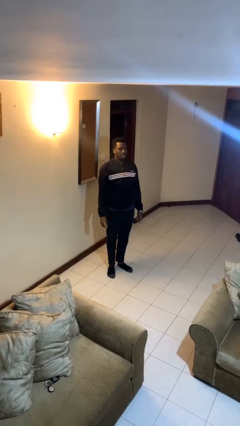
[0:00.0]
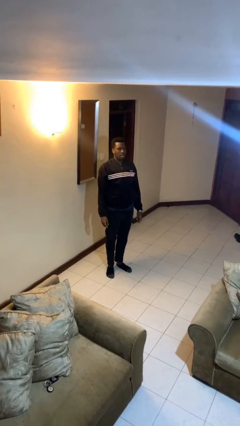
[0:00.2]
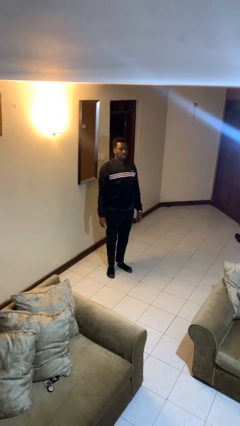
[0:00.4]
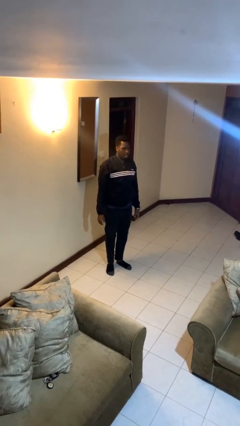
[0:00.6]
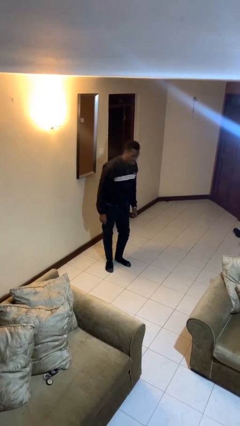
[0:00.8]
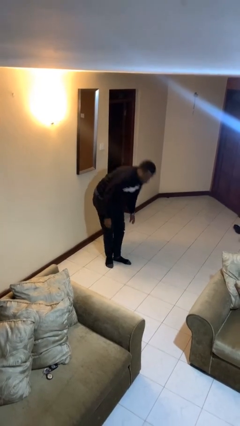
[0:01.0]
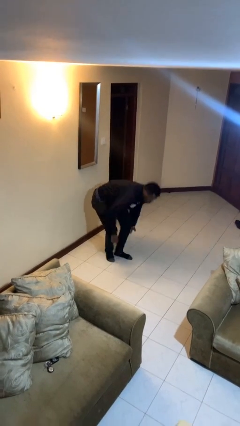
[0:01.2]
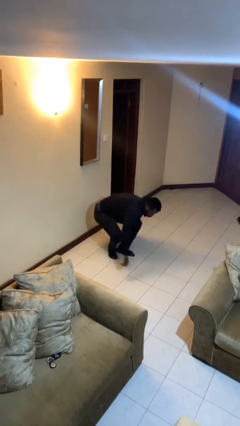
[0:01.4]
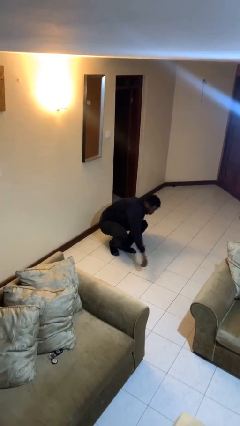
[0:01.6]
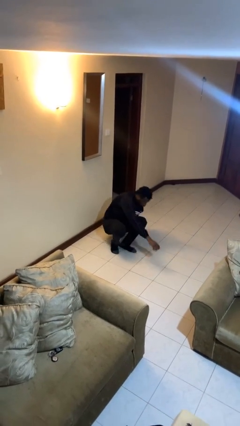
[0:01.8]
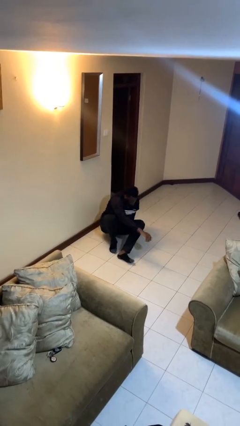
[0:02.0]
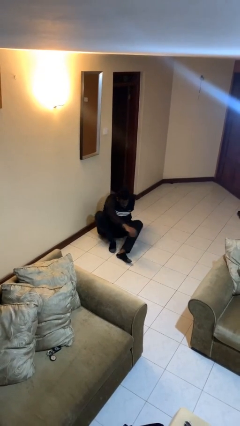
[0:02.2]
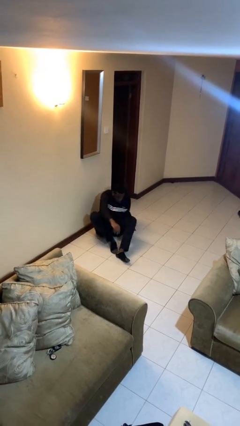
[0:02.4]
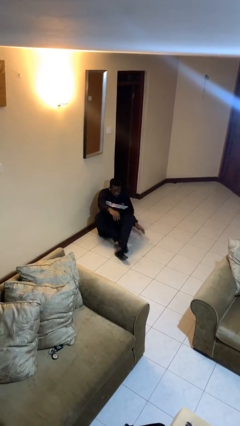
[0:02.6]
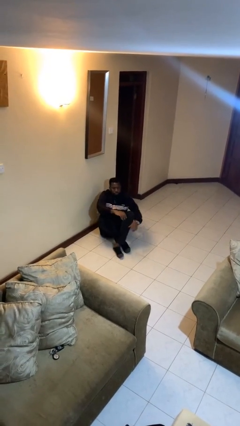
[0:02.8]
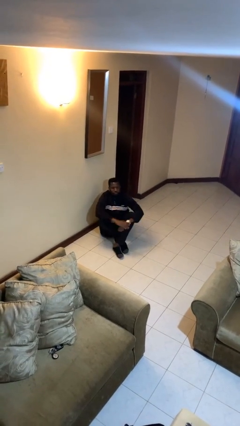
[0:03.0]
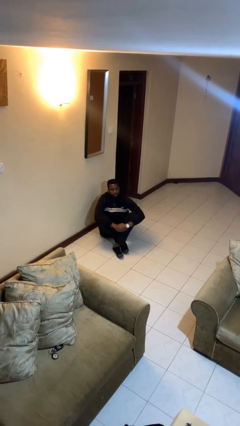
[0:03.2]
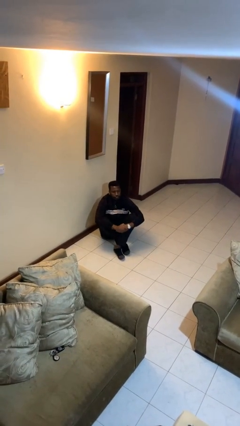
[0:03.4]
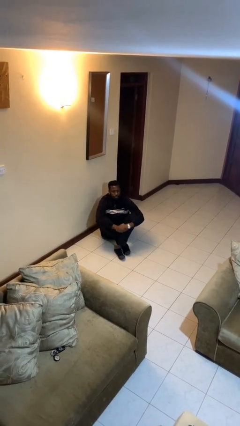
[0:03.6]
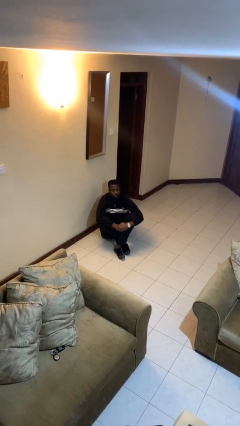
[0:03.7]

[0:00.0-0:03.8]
person sits crisscross

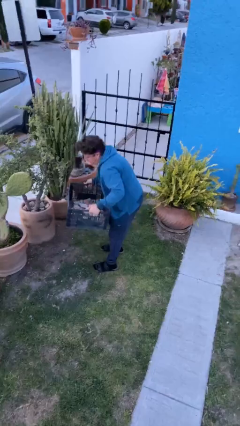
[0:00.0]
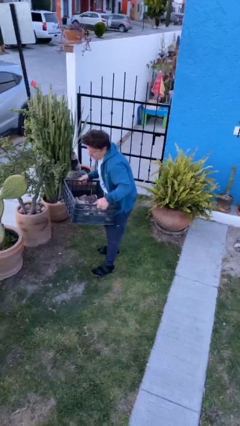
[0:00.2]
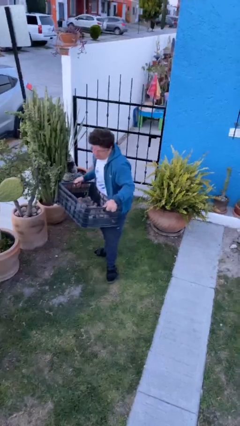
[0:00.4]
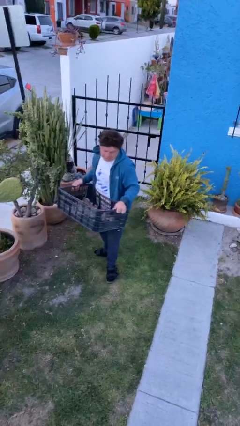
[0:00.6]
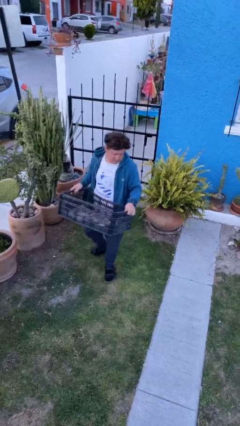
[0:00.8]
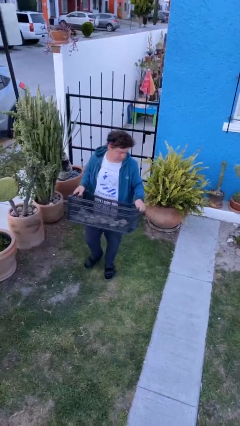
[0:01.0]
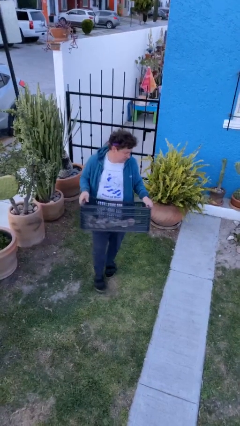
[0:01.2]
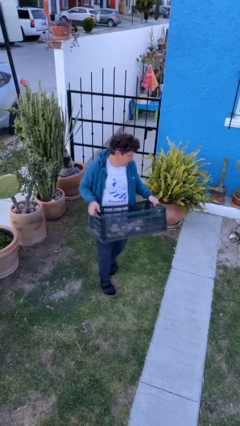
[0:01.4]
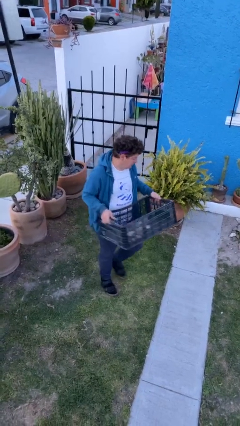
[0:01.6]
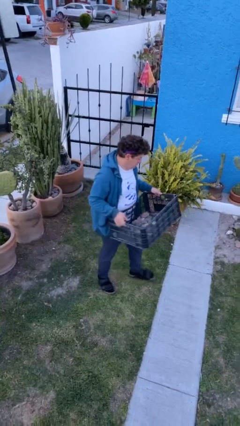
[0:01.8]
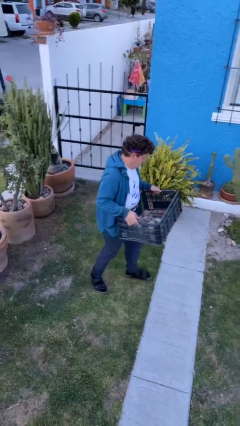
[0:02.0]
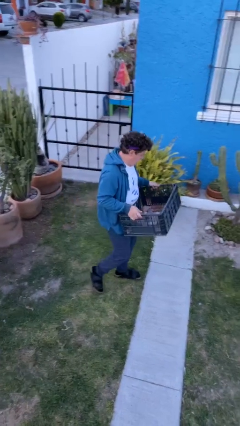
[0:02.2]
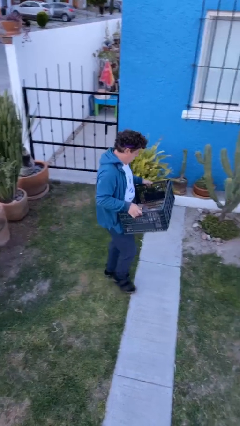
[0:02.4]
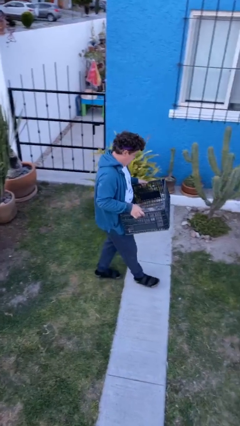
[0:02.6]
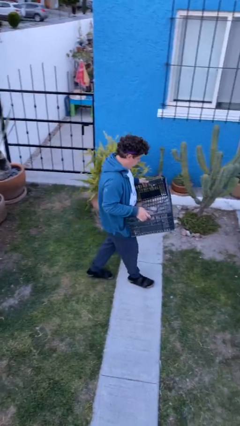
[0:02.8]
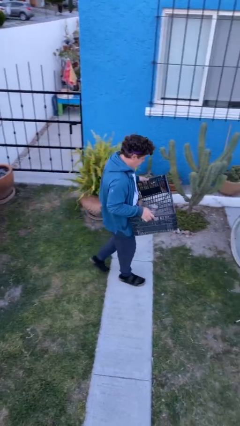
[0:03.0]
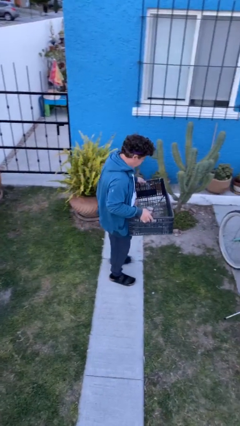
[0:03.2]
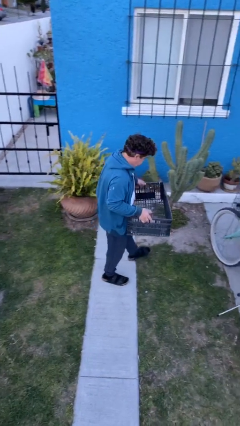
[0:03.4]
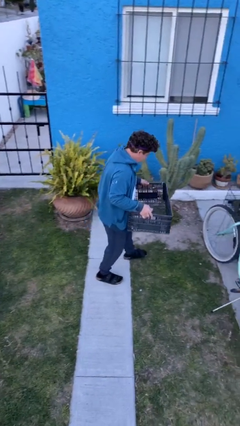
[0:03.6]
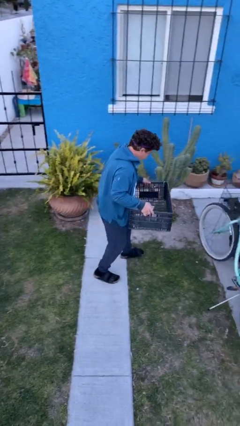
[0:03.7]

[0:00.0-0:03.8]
person carries heavy object

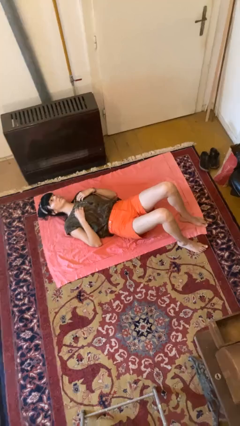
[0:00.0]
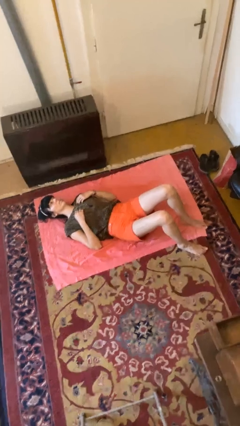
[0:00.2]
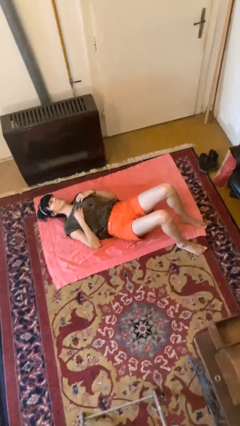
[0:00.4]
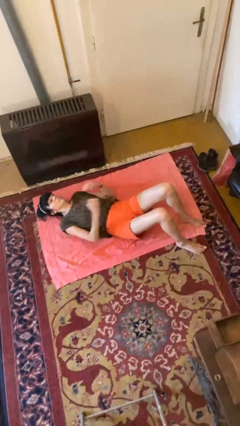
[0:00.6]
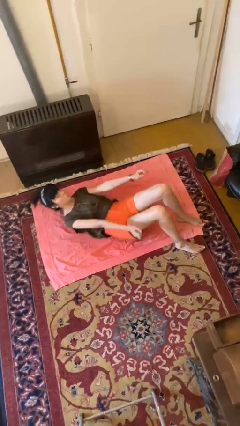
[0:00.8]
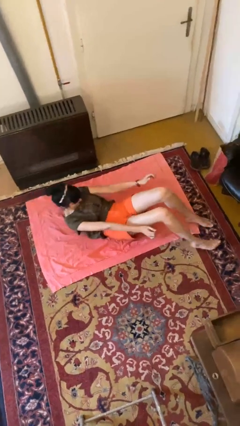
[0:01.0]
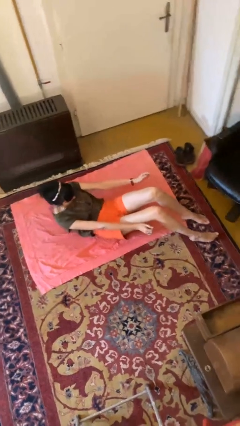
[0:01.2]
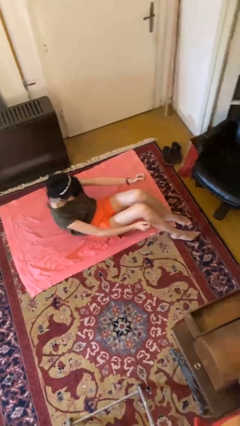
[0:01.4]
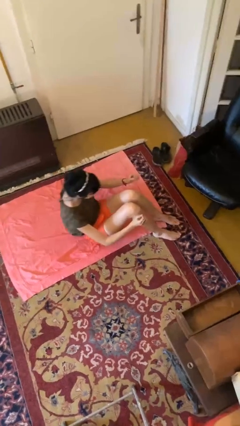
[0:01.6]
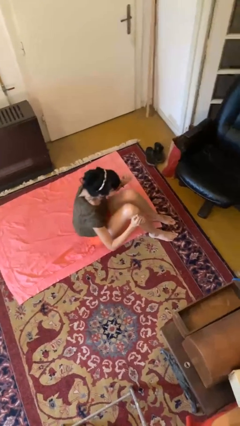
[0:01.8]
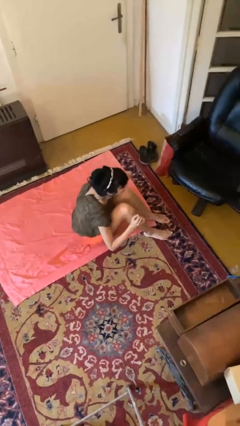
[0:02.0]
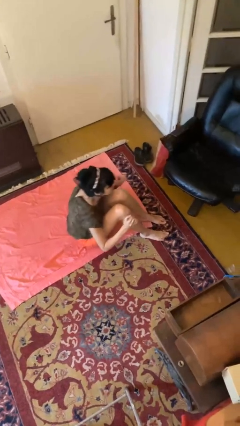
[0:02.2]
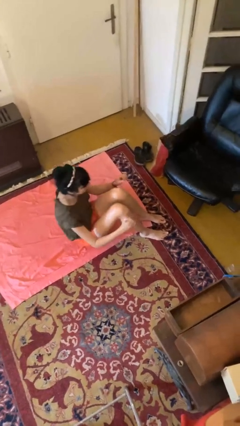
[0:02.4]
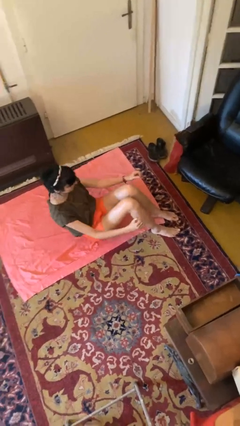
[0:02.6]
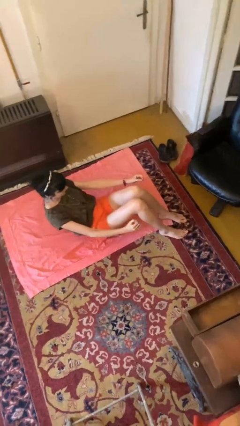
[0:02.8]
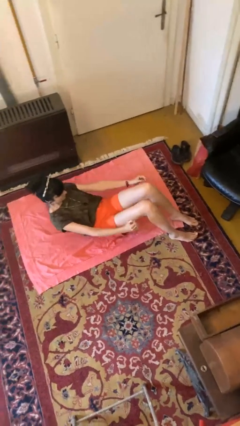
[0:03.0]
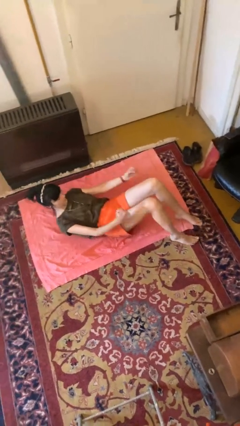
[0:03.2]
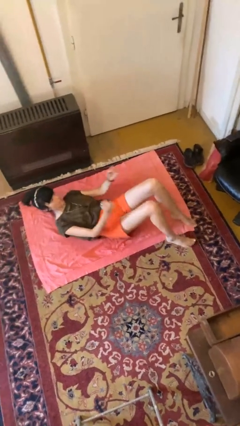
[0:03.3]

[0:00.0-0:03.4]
person exercises with situp

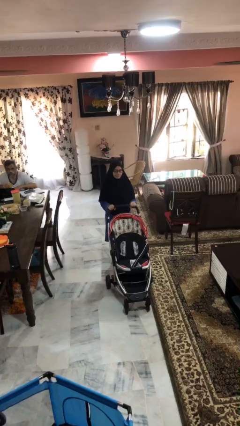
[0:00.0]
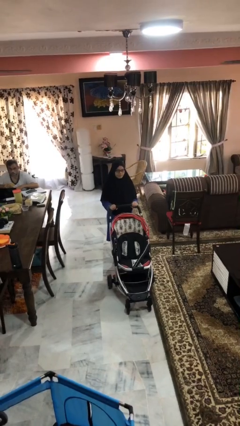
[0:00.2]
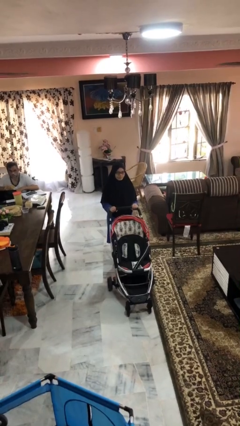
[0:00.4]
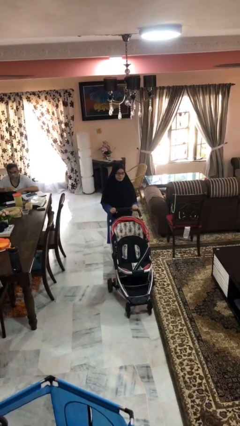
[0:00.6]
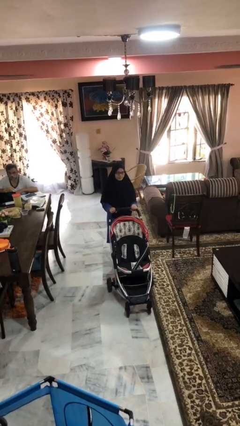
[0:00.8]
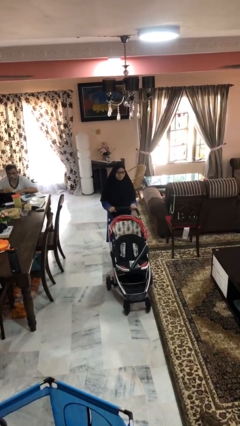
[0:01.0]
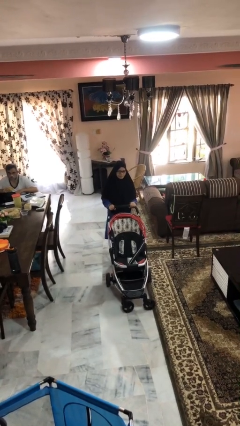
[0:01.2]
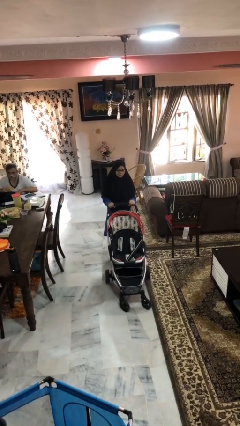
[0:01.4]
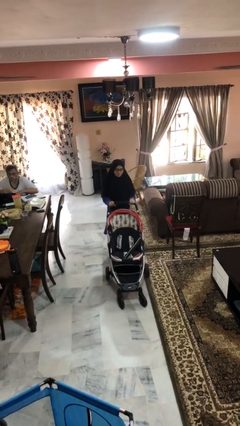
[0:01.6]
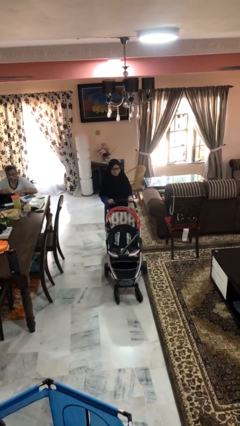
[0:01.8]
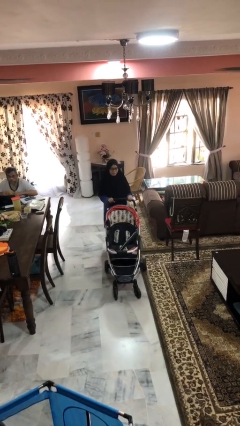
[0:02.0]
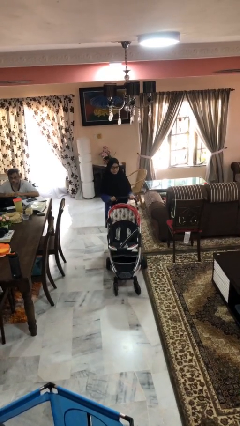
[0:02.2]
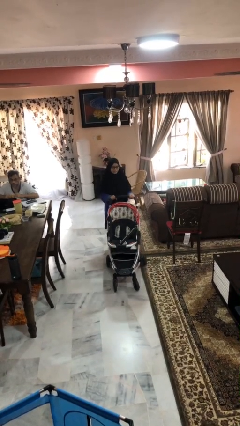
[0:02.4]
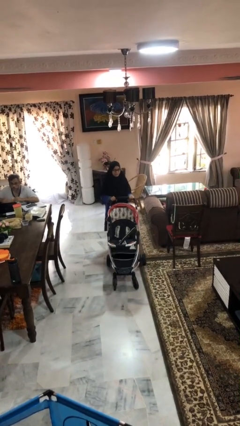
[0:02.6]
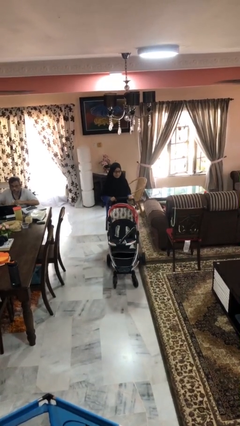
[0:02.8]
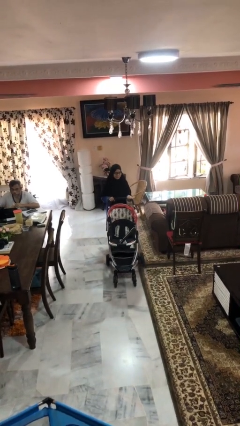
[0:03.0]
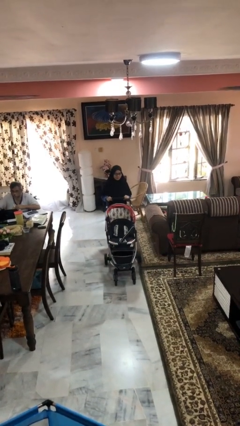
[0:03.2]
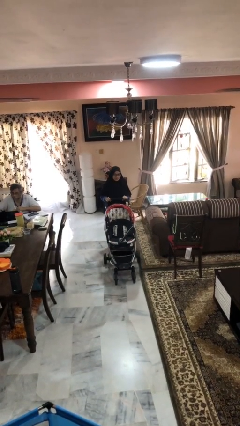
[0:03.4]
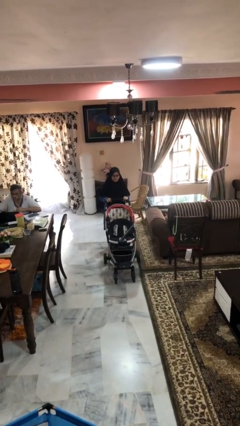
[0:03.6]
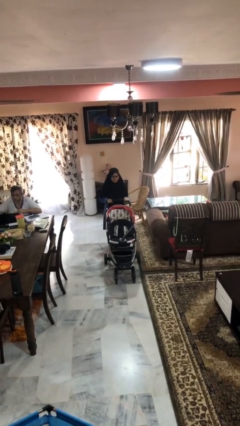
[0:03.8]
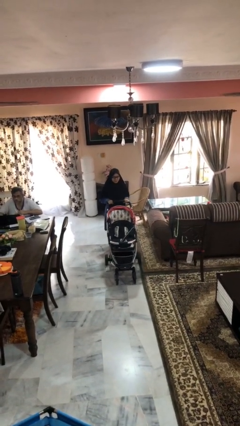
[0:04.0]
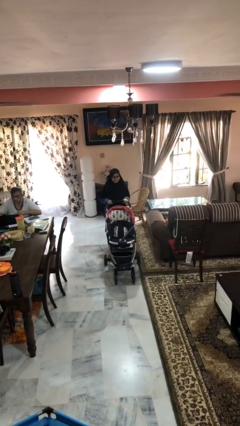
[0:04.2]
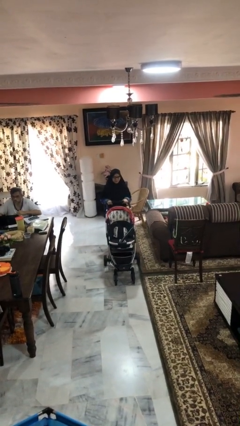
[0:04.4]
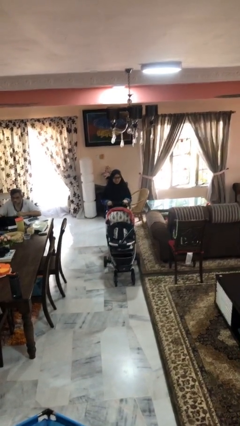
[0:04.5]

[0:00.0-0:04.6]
person pulls wheeled cart

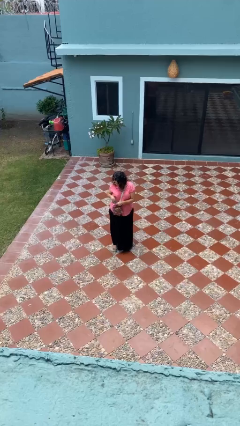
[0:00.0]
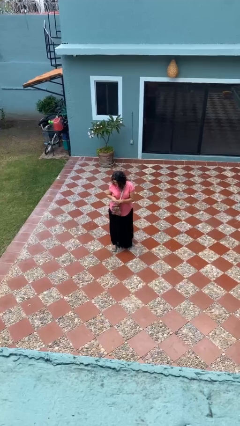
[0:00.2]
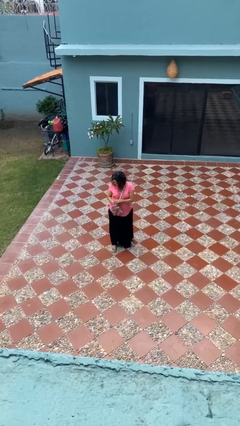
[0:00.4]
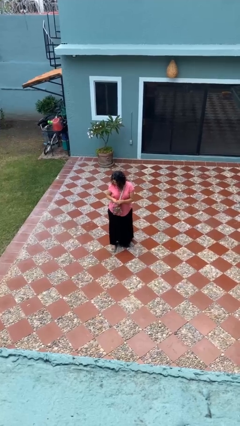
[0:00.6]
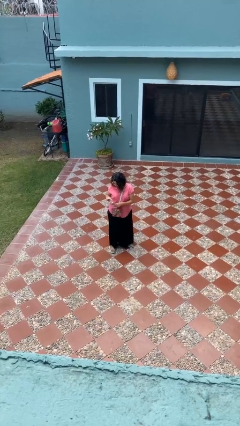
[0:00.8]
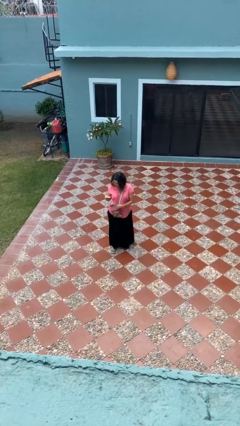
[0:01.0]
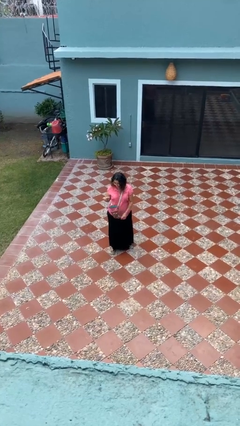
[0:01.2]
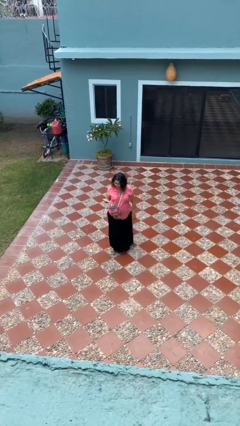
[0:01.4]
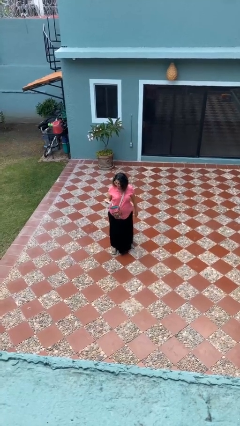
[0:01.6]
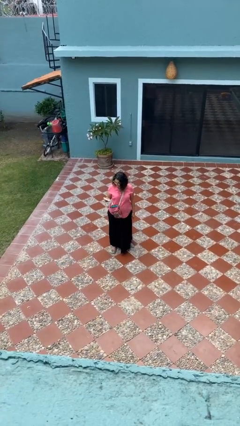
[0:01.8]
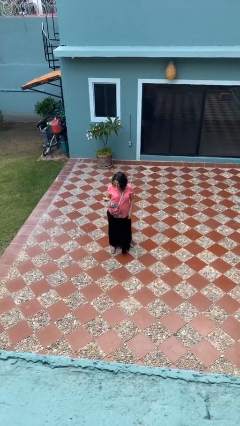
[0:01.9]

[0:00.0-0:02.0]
person takes object from purse

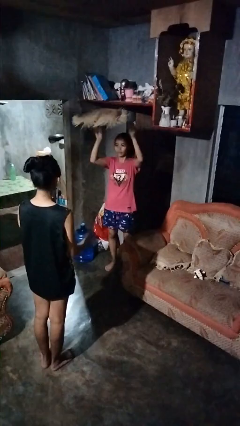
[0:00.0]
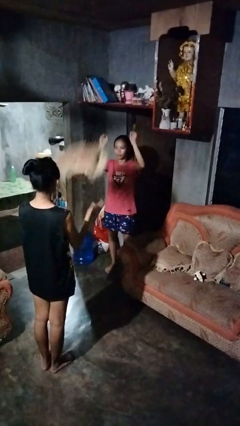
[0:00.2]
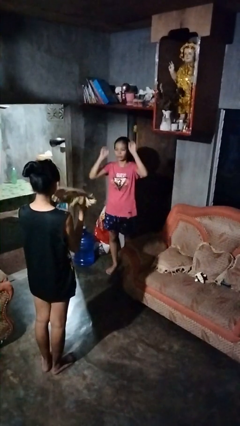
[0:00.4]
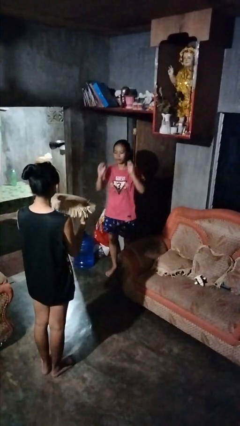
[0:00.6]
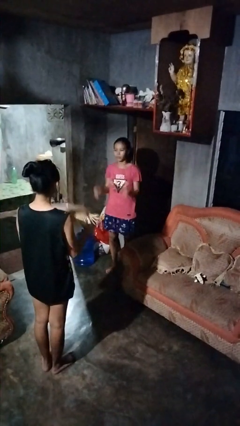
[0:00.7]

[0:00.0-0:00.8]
person throws object to person
